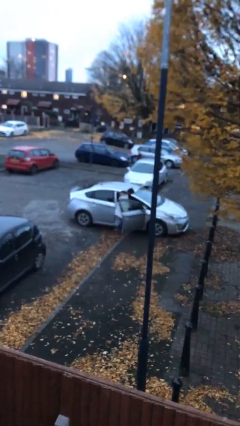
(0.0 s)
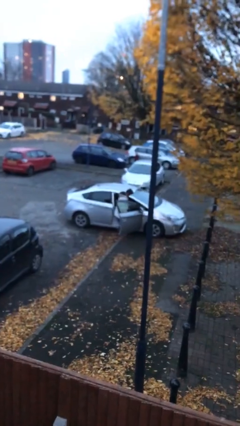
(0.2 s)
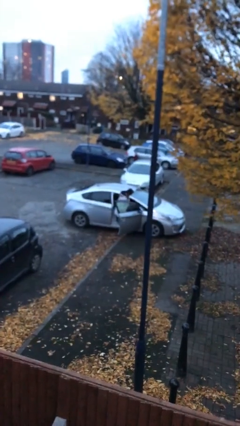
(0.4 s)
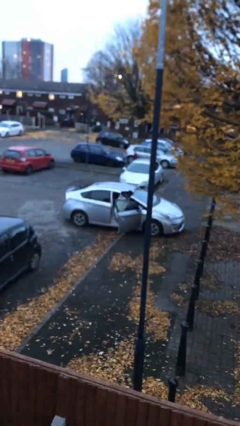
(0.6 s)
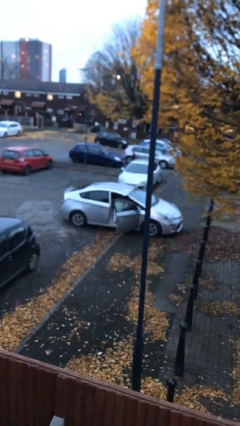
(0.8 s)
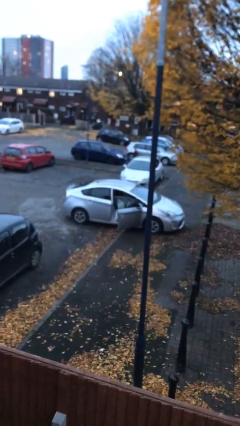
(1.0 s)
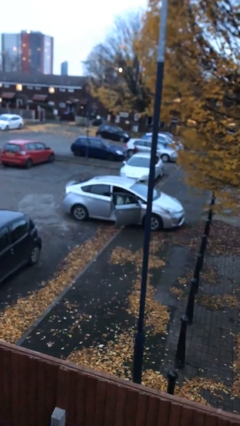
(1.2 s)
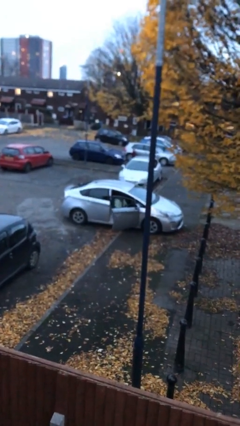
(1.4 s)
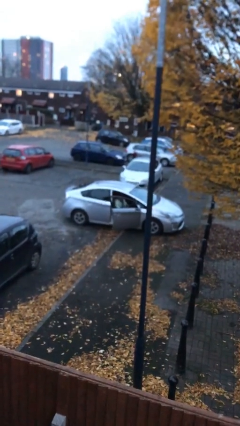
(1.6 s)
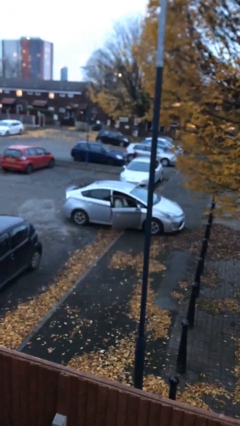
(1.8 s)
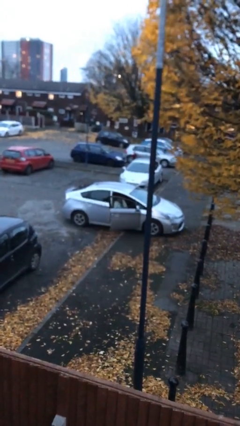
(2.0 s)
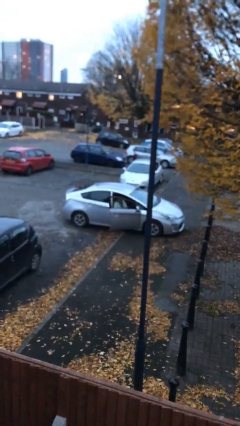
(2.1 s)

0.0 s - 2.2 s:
person enters car

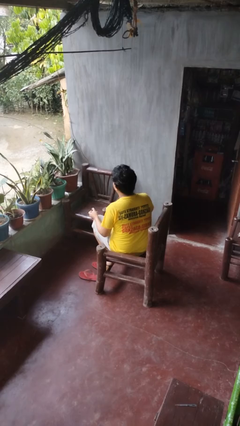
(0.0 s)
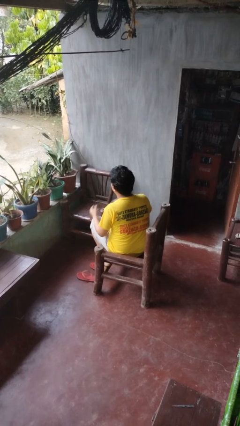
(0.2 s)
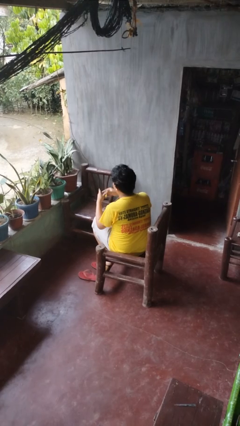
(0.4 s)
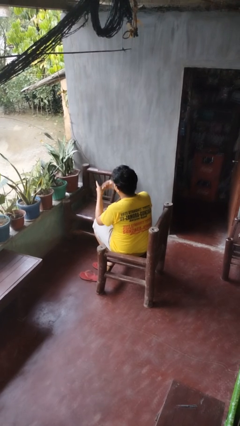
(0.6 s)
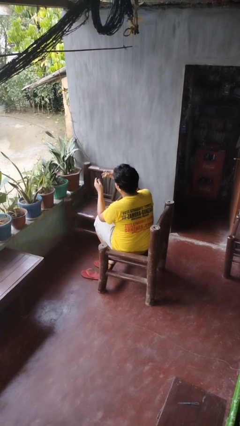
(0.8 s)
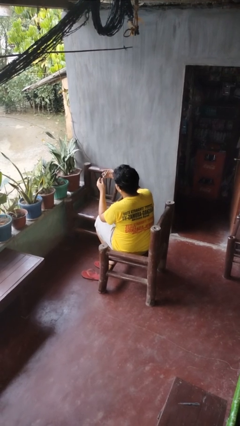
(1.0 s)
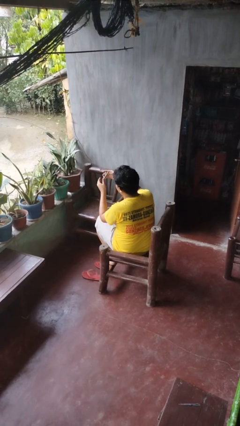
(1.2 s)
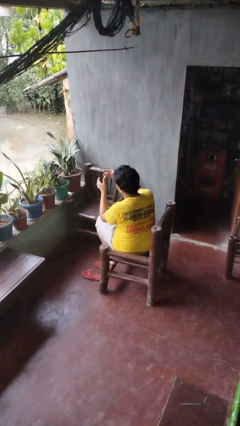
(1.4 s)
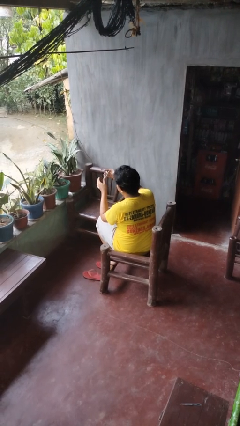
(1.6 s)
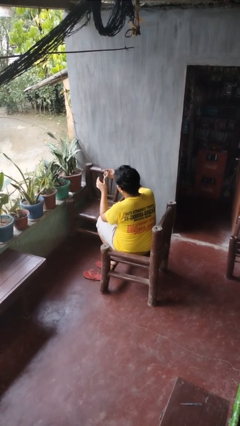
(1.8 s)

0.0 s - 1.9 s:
person clips fingernails

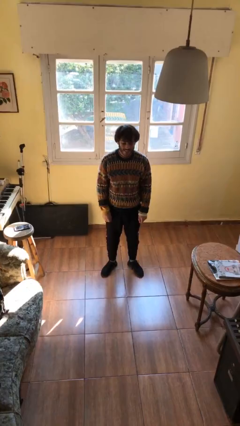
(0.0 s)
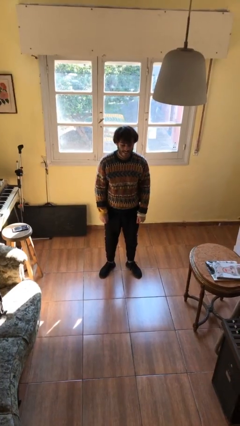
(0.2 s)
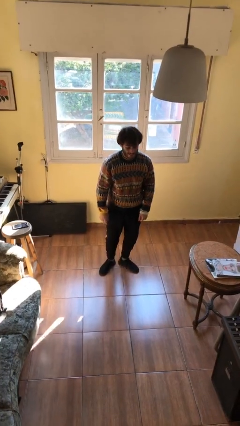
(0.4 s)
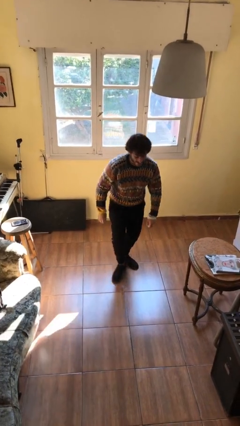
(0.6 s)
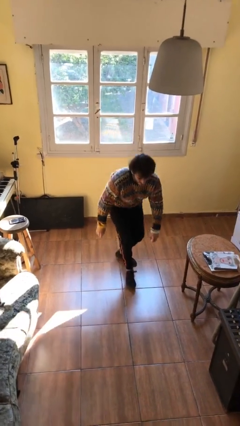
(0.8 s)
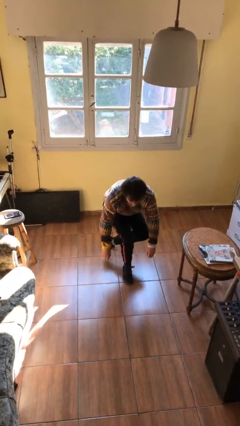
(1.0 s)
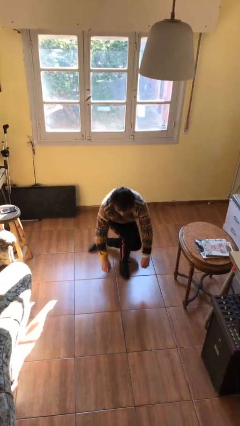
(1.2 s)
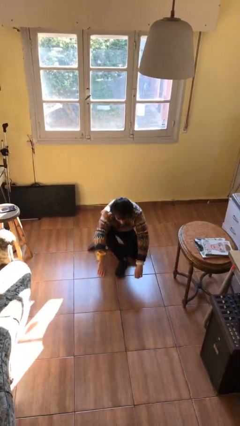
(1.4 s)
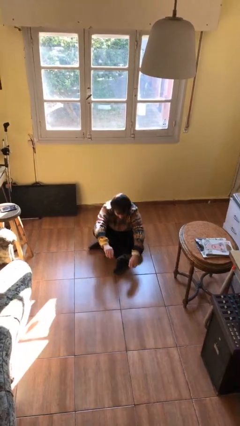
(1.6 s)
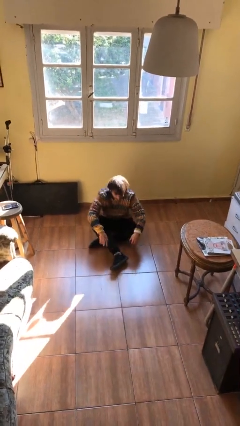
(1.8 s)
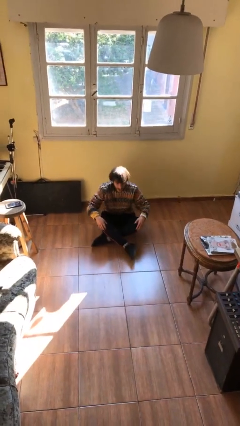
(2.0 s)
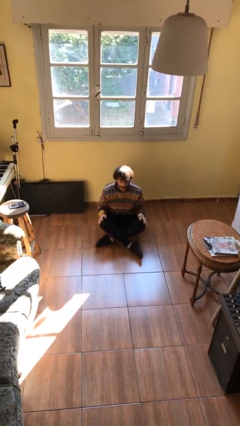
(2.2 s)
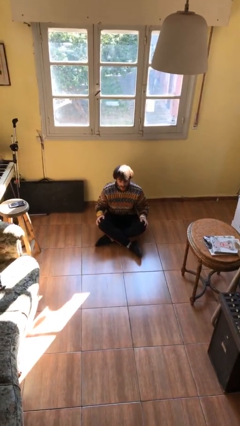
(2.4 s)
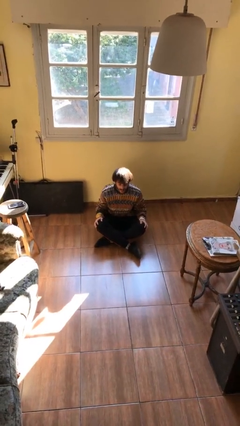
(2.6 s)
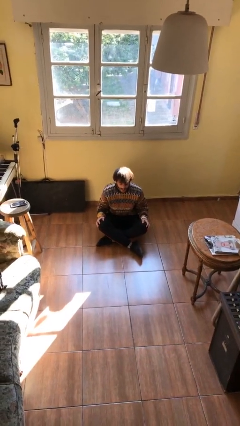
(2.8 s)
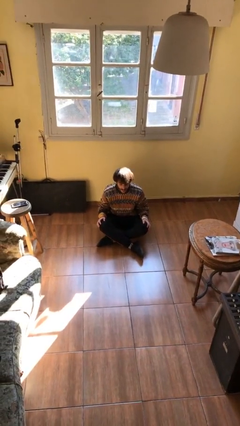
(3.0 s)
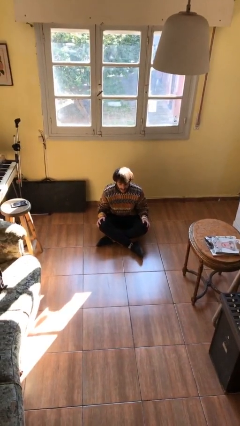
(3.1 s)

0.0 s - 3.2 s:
person sits crisscross

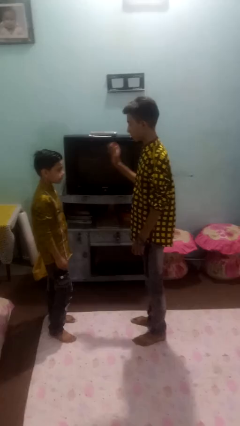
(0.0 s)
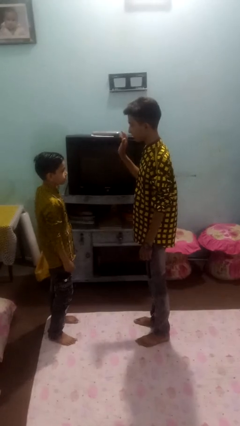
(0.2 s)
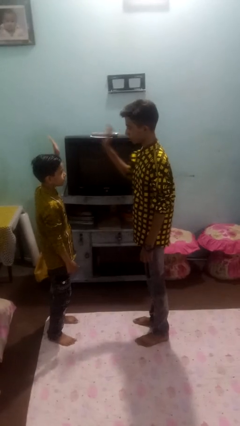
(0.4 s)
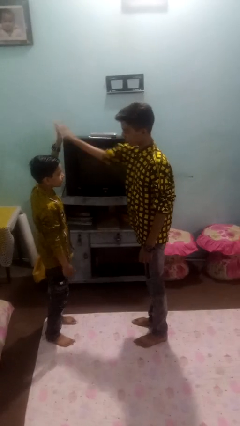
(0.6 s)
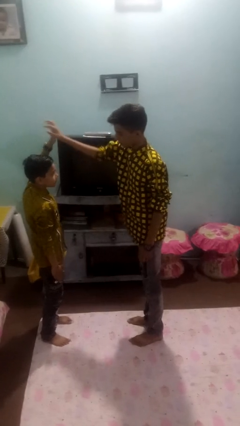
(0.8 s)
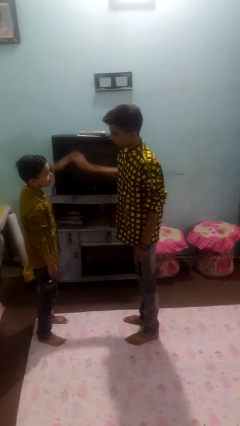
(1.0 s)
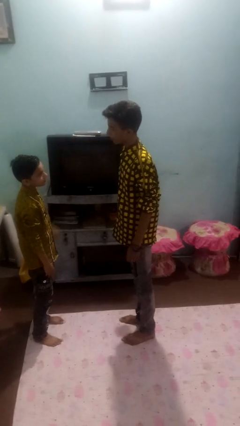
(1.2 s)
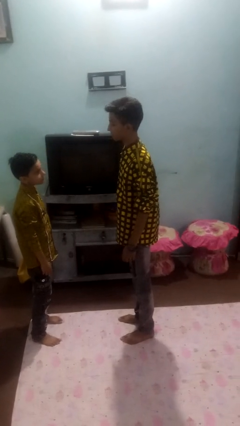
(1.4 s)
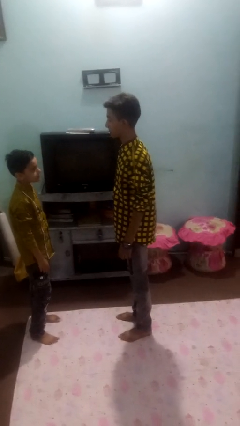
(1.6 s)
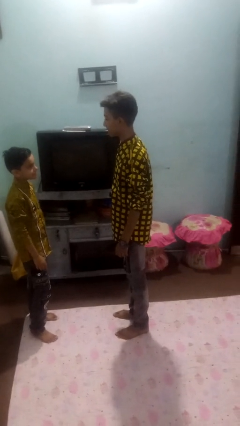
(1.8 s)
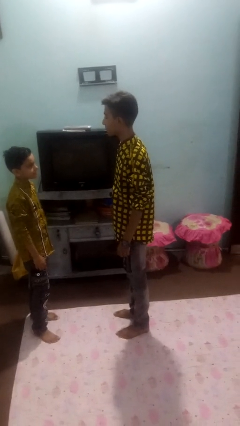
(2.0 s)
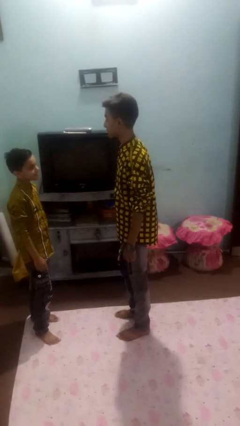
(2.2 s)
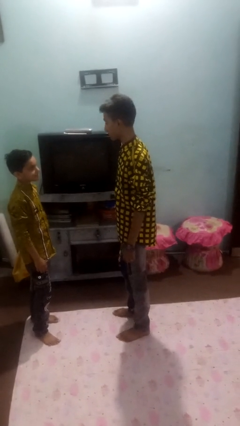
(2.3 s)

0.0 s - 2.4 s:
person highfives hand

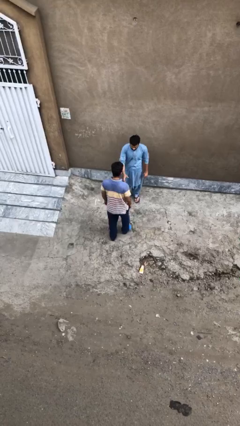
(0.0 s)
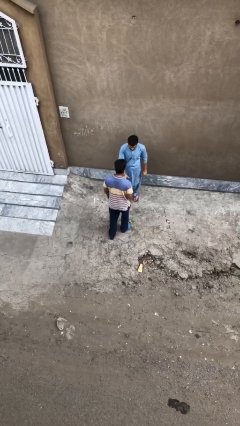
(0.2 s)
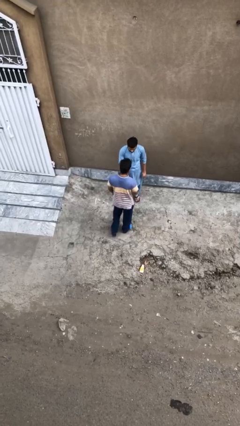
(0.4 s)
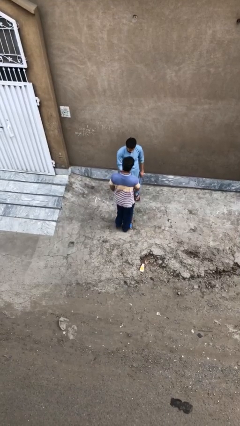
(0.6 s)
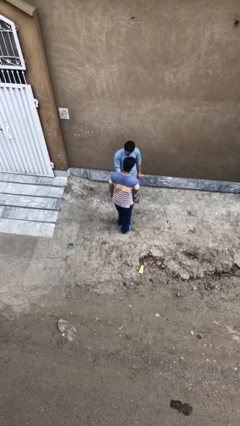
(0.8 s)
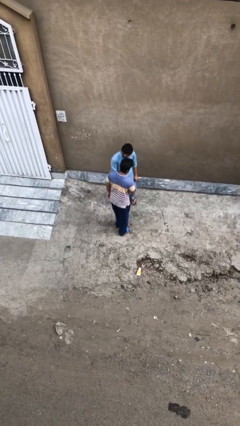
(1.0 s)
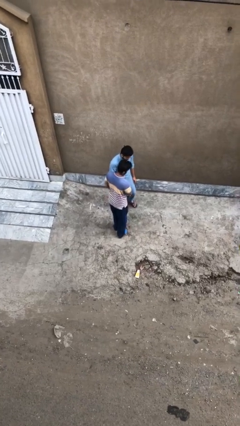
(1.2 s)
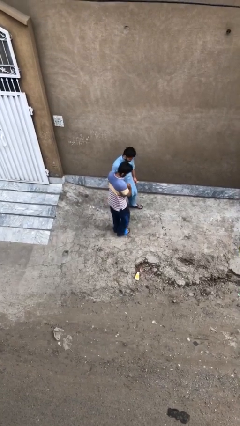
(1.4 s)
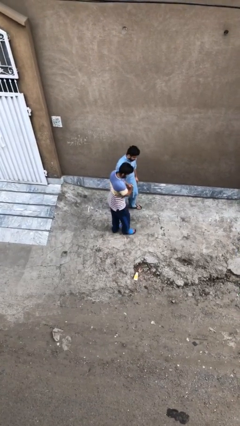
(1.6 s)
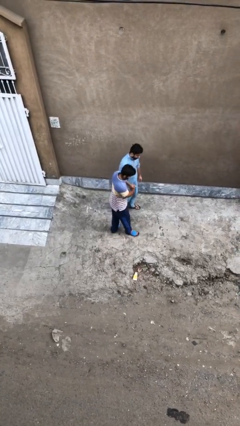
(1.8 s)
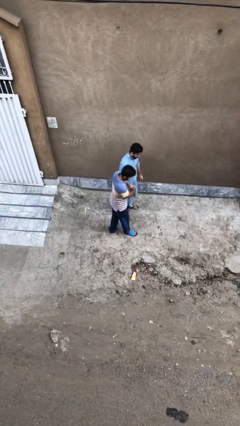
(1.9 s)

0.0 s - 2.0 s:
person shakes hand

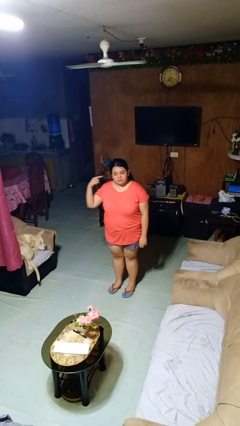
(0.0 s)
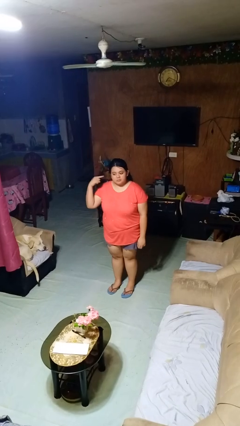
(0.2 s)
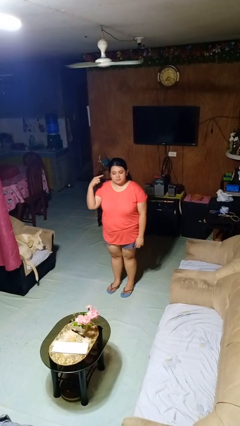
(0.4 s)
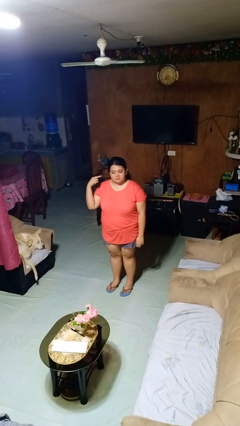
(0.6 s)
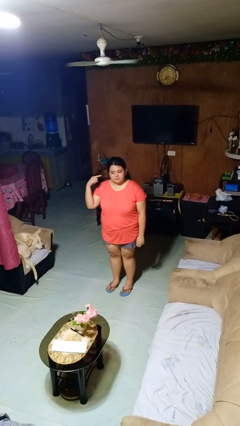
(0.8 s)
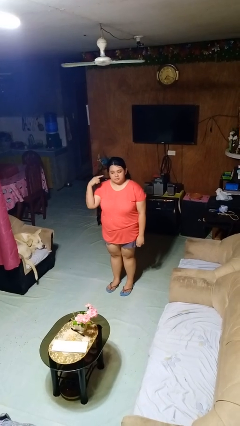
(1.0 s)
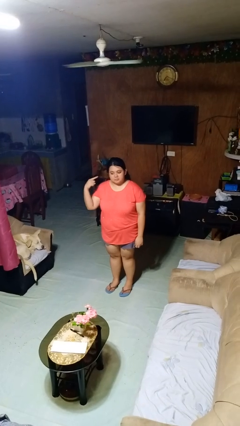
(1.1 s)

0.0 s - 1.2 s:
person gestures listen closely

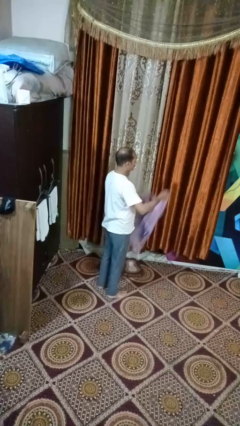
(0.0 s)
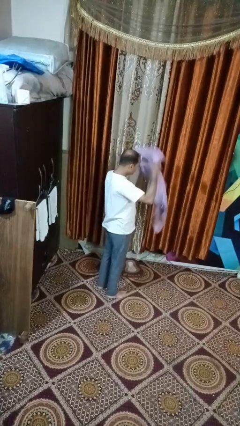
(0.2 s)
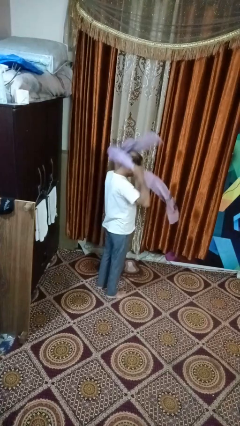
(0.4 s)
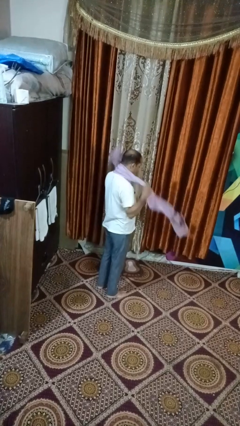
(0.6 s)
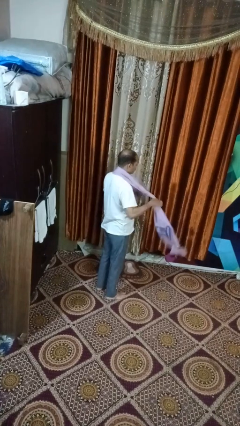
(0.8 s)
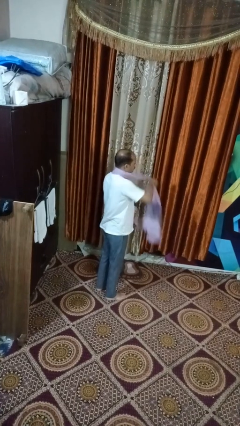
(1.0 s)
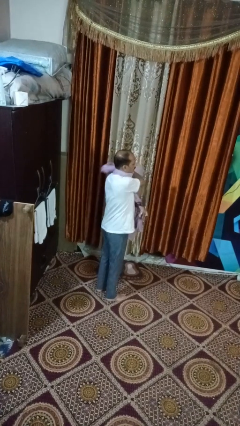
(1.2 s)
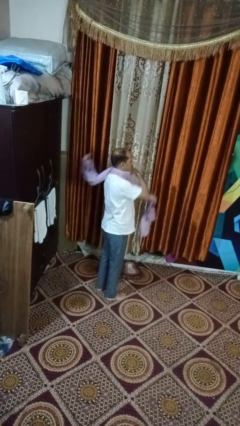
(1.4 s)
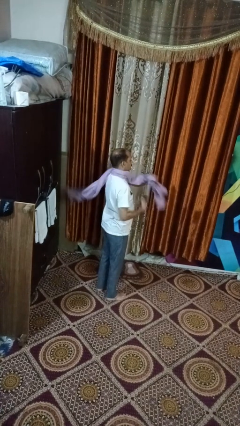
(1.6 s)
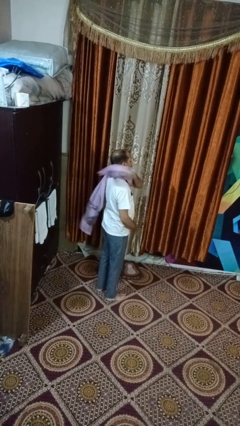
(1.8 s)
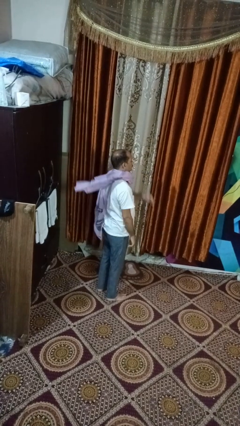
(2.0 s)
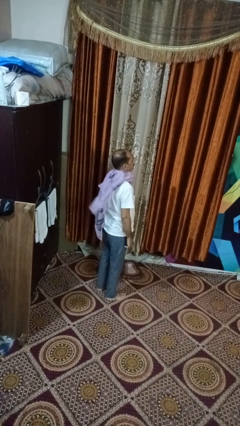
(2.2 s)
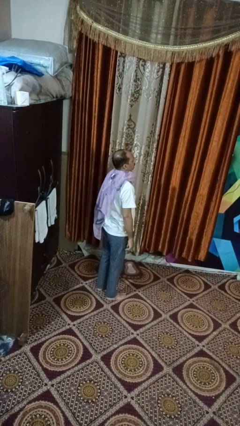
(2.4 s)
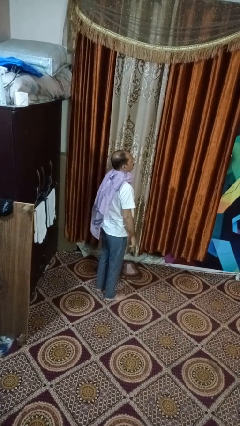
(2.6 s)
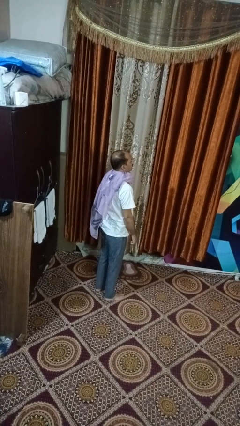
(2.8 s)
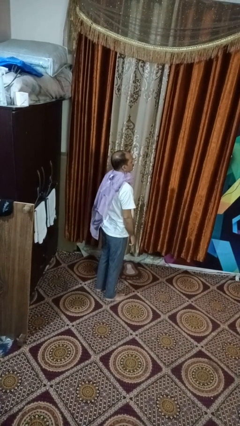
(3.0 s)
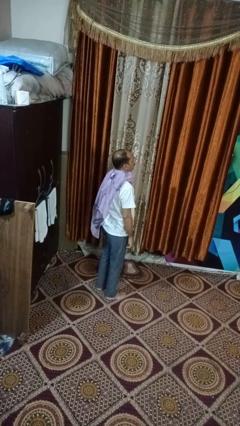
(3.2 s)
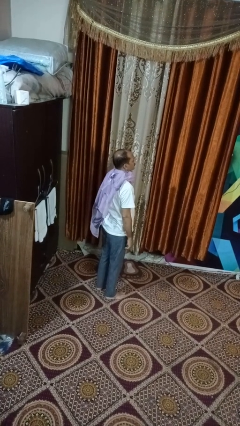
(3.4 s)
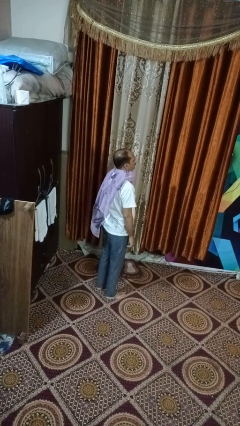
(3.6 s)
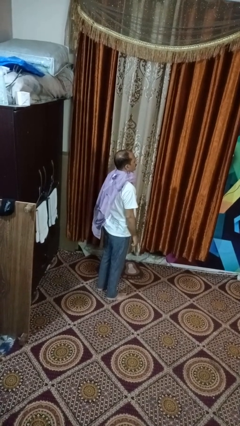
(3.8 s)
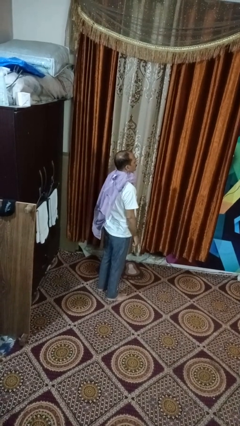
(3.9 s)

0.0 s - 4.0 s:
person puts on scarf
